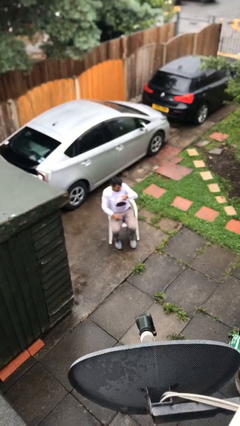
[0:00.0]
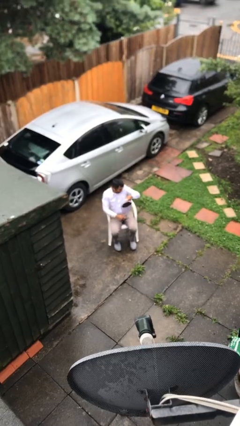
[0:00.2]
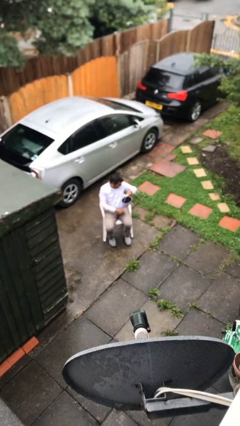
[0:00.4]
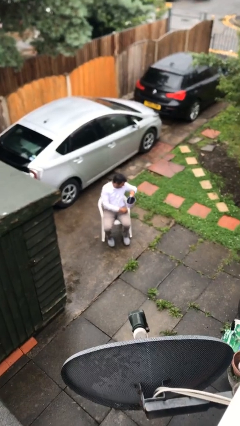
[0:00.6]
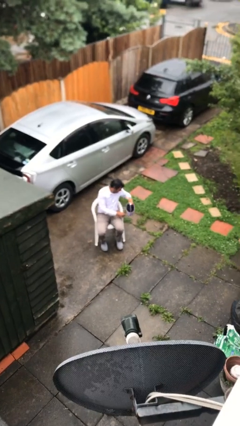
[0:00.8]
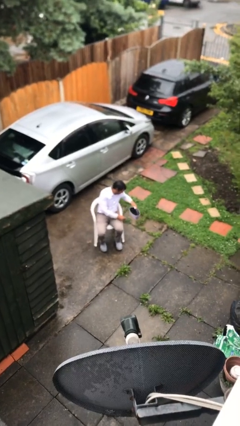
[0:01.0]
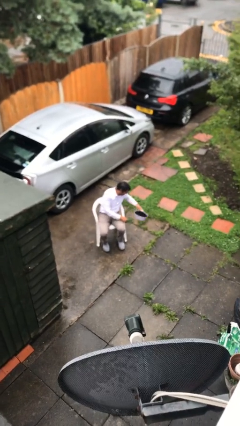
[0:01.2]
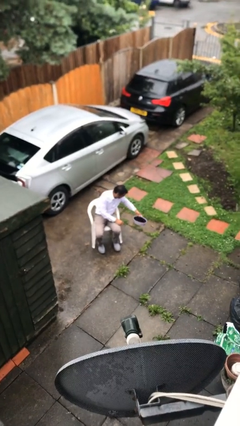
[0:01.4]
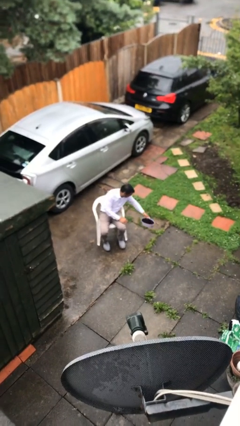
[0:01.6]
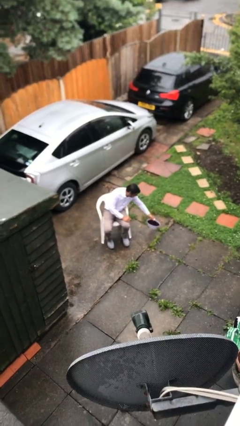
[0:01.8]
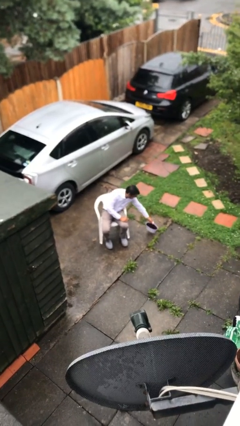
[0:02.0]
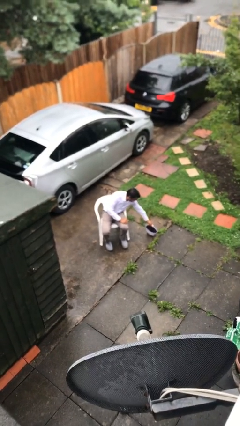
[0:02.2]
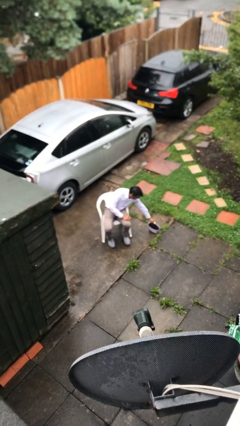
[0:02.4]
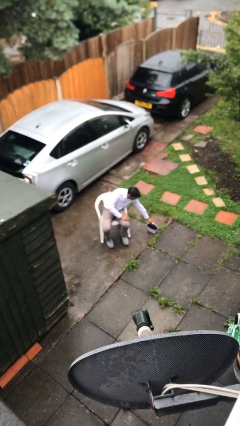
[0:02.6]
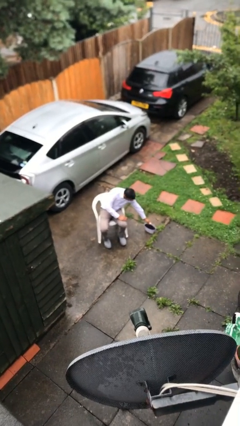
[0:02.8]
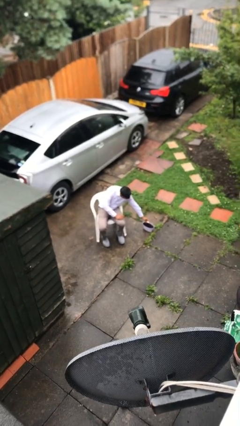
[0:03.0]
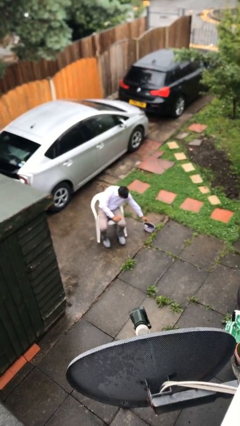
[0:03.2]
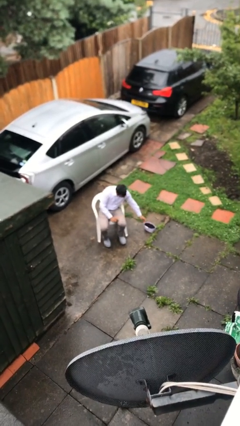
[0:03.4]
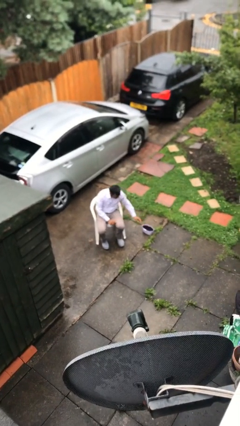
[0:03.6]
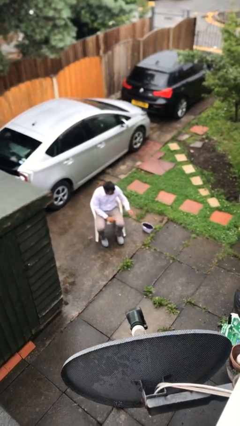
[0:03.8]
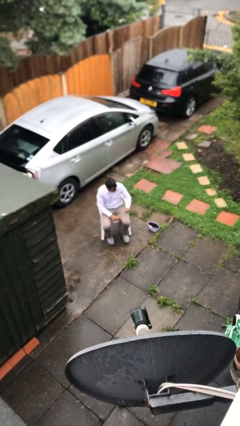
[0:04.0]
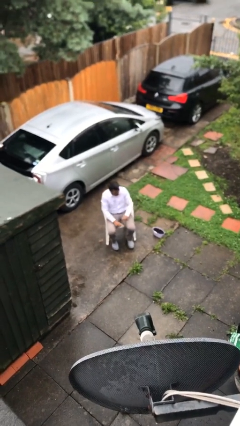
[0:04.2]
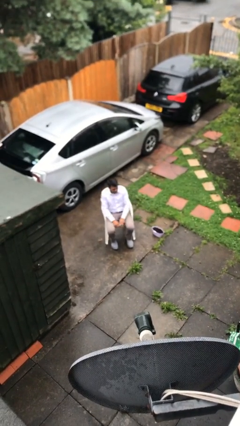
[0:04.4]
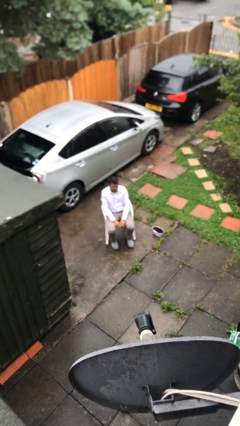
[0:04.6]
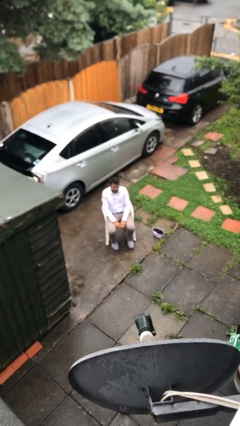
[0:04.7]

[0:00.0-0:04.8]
person puts down object on floor

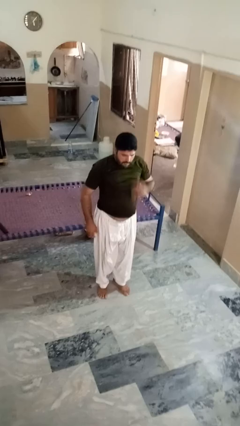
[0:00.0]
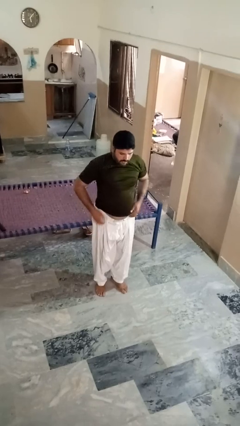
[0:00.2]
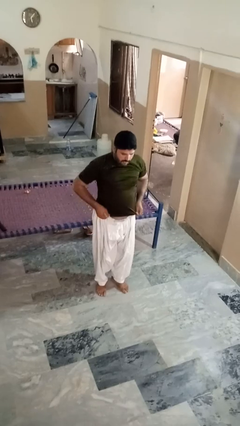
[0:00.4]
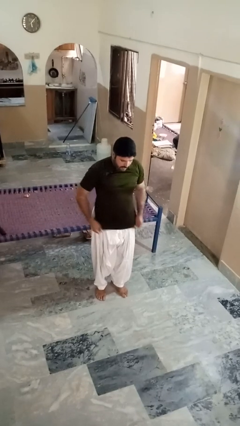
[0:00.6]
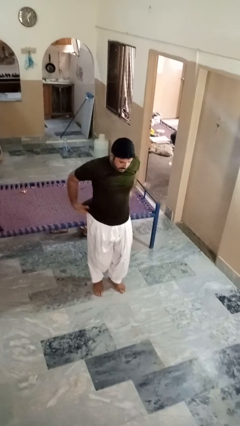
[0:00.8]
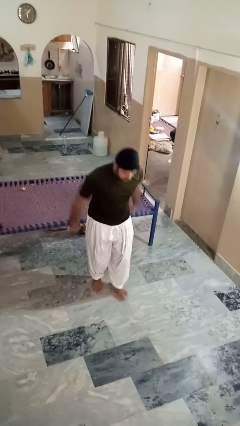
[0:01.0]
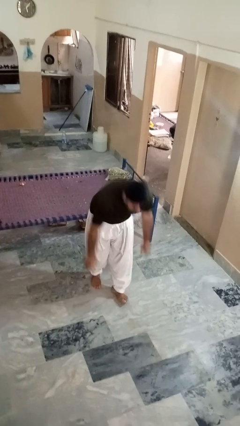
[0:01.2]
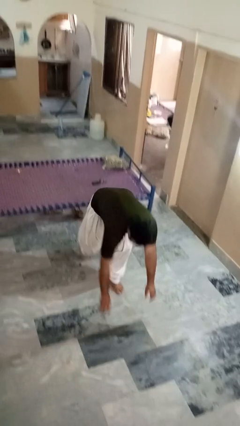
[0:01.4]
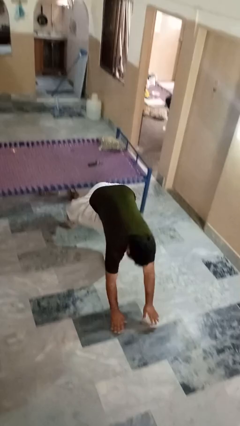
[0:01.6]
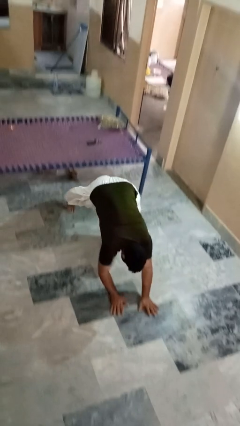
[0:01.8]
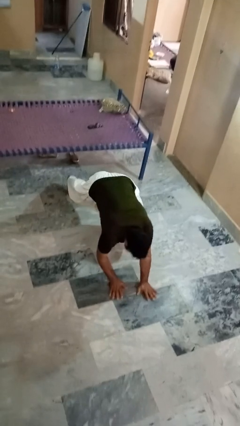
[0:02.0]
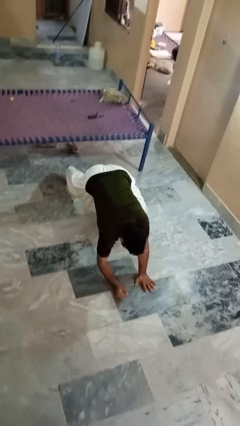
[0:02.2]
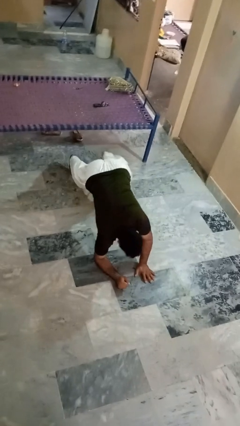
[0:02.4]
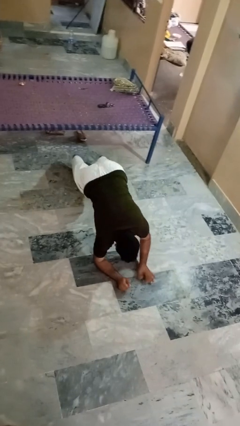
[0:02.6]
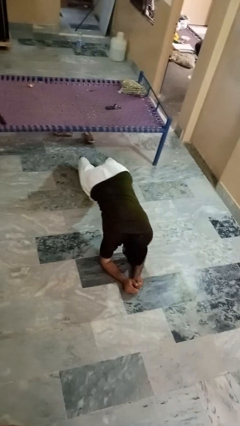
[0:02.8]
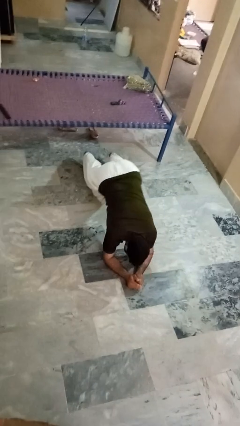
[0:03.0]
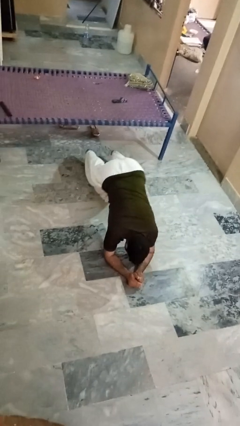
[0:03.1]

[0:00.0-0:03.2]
person exercises with plank

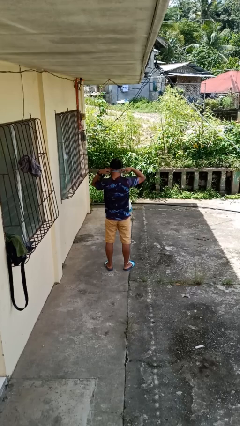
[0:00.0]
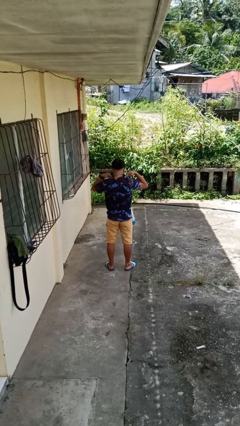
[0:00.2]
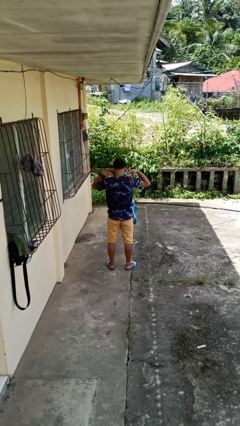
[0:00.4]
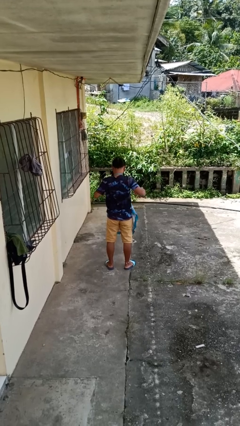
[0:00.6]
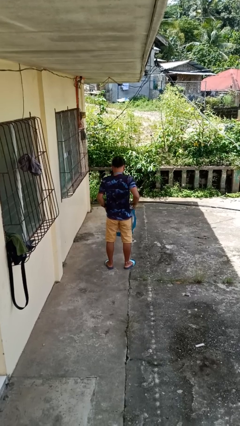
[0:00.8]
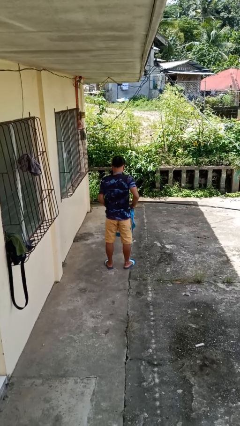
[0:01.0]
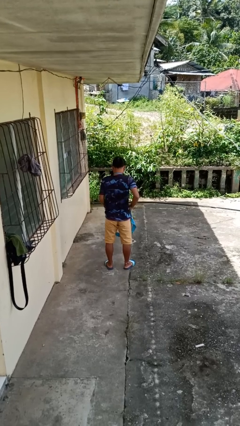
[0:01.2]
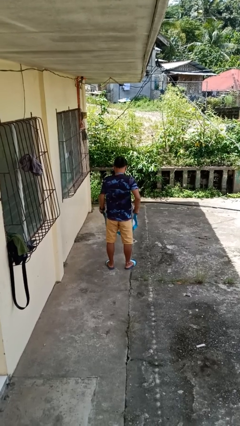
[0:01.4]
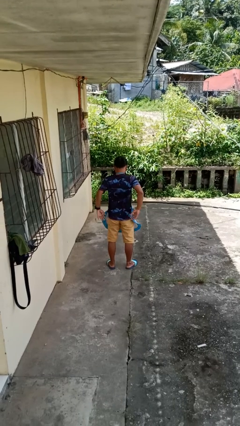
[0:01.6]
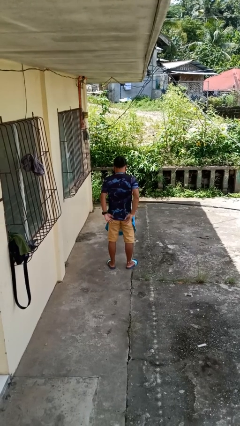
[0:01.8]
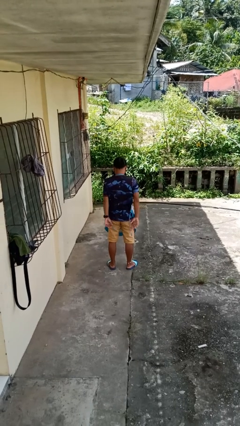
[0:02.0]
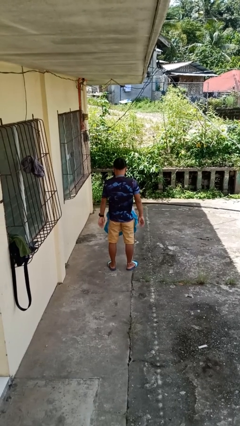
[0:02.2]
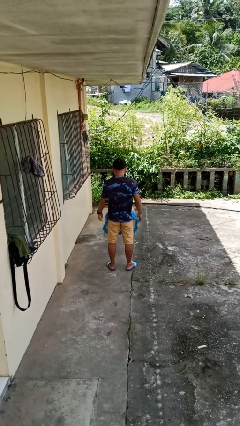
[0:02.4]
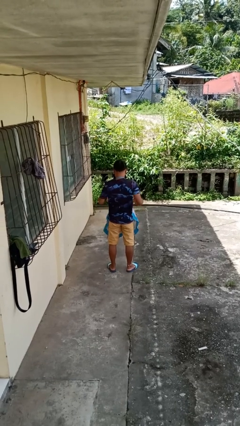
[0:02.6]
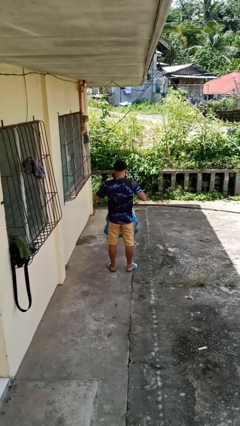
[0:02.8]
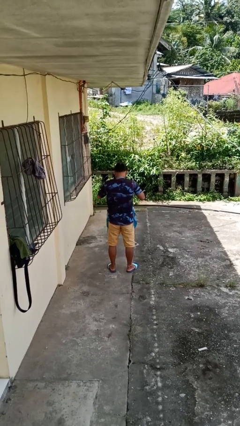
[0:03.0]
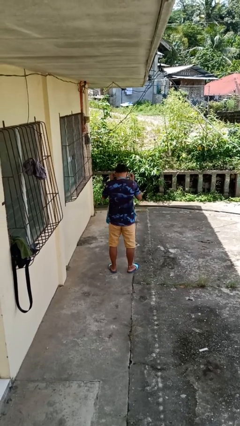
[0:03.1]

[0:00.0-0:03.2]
person puts on apron

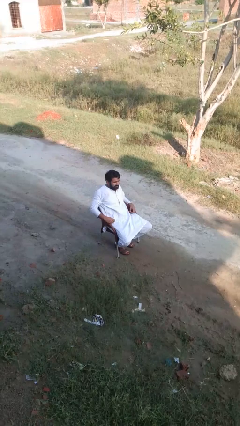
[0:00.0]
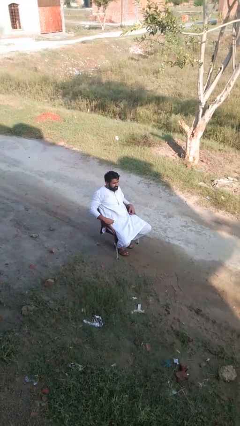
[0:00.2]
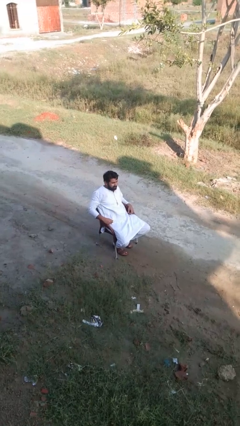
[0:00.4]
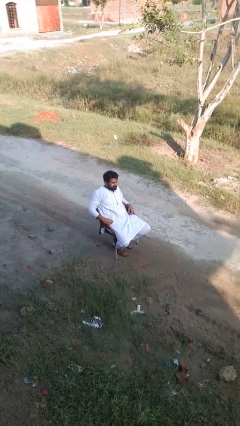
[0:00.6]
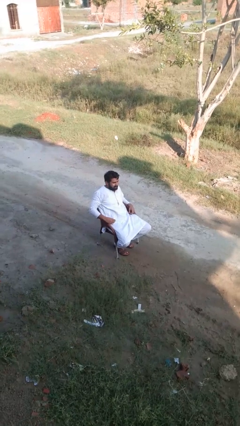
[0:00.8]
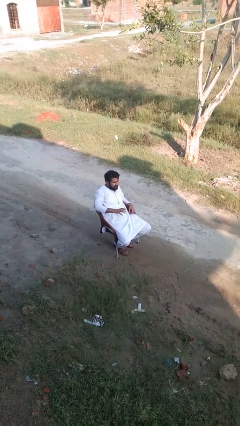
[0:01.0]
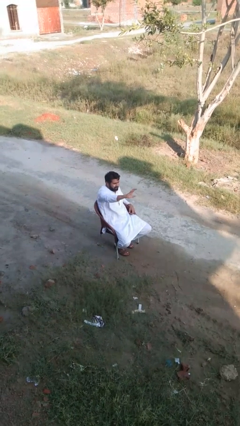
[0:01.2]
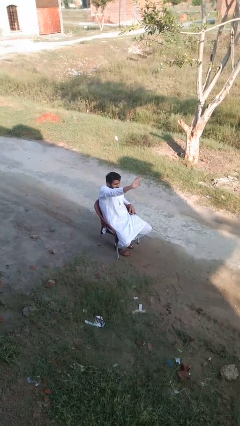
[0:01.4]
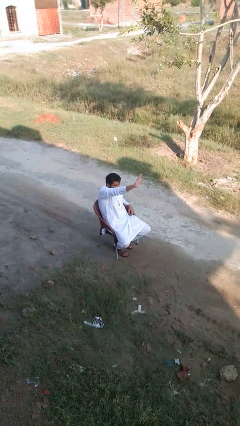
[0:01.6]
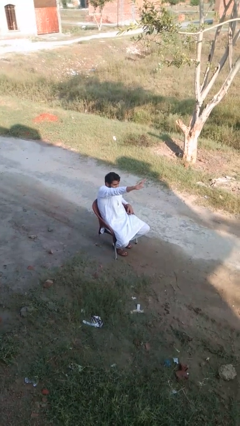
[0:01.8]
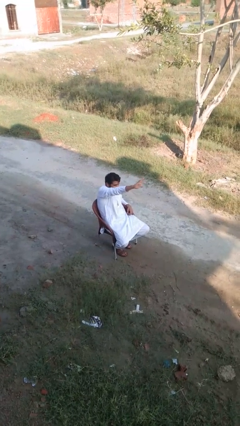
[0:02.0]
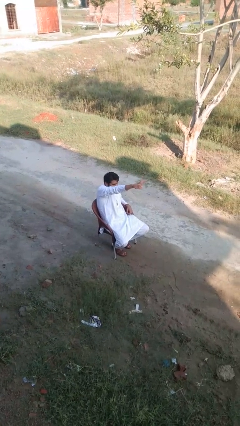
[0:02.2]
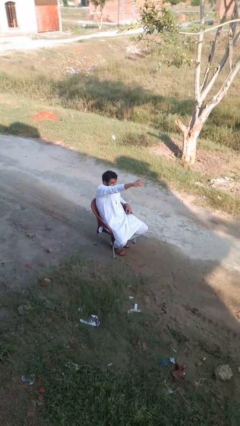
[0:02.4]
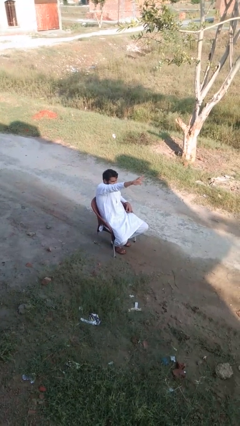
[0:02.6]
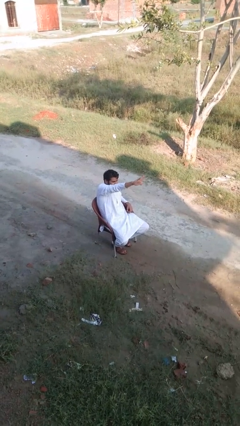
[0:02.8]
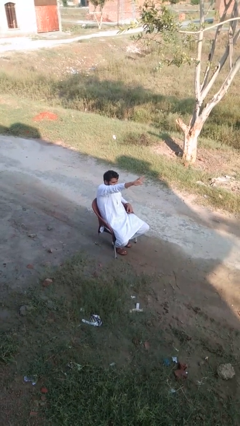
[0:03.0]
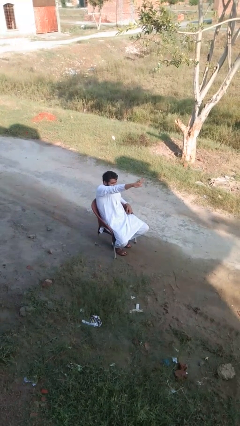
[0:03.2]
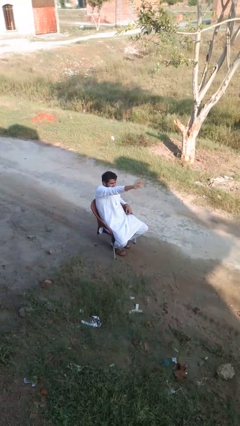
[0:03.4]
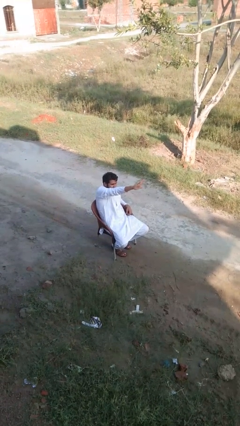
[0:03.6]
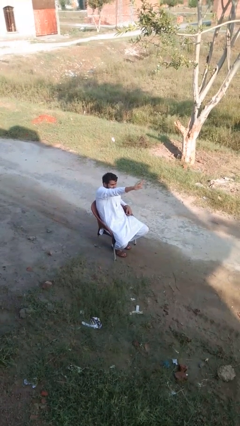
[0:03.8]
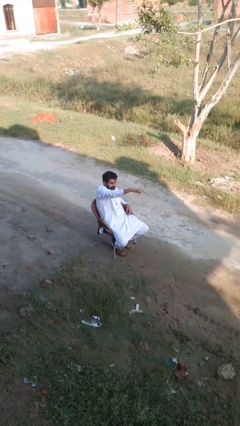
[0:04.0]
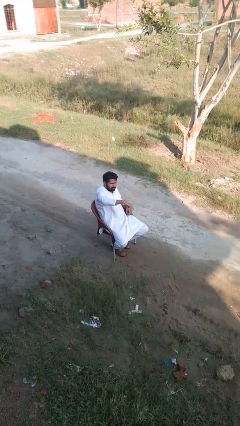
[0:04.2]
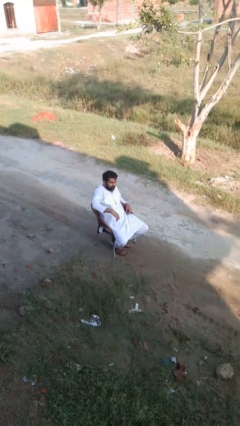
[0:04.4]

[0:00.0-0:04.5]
person gestures stop

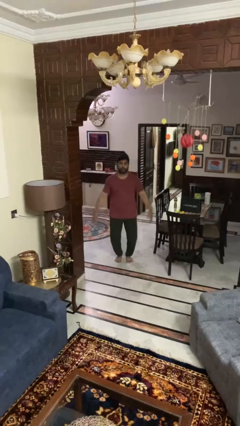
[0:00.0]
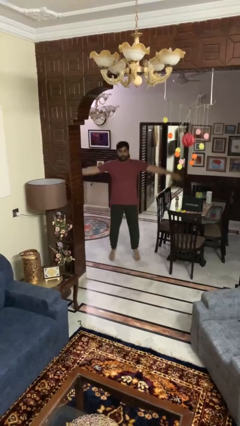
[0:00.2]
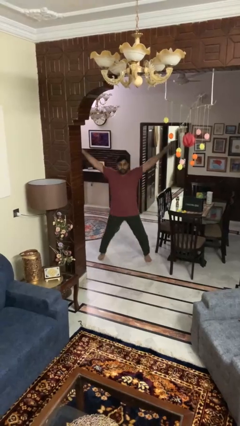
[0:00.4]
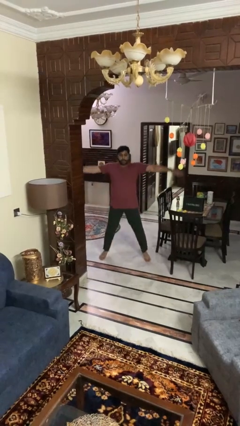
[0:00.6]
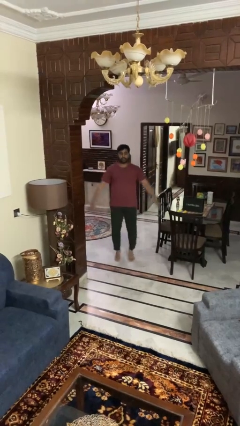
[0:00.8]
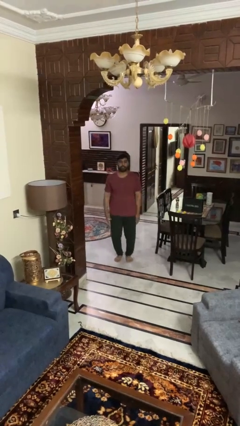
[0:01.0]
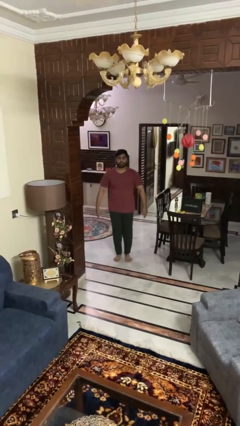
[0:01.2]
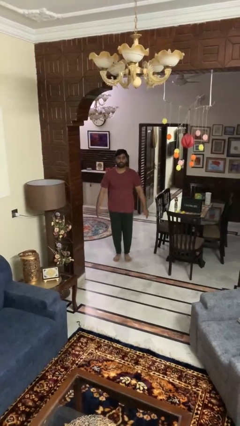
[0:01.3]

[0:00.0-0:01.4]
person exercises with jumping jacks

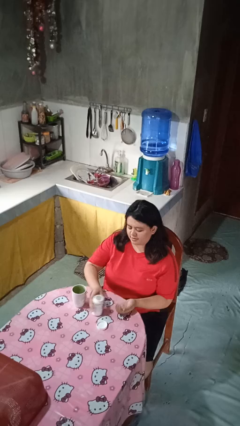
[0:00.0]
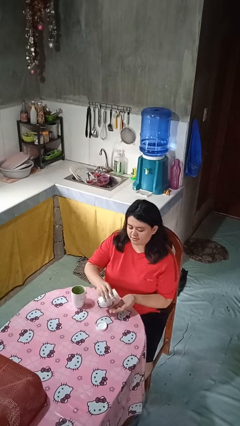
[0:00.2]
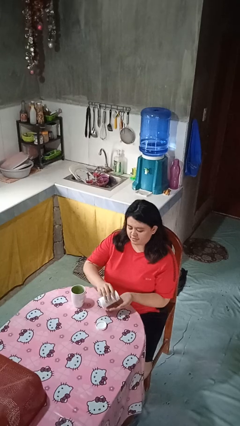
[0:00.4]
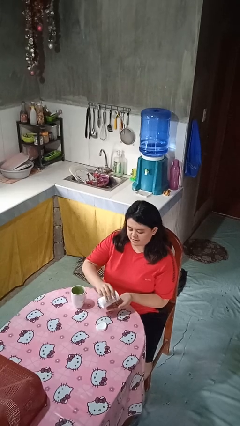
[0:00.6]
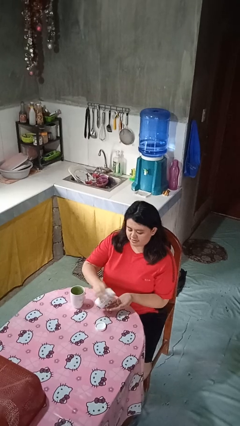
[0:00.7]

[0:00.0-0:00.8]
person takes medicine pills
